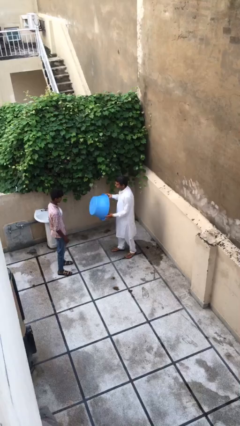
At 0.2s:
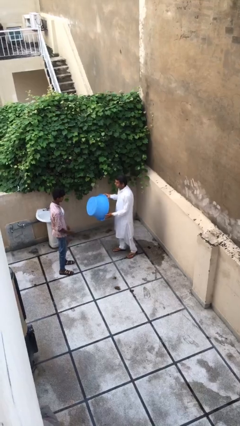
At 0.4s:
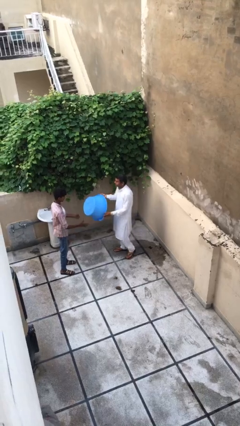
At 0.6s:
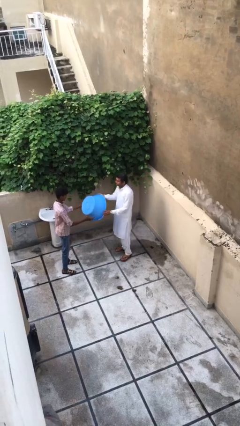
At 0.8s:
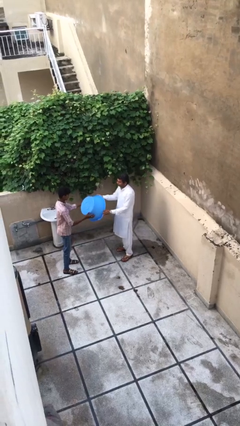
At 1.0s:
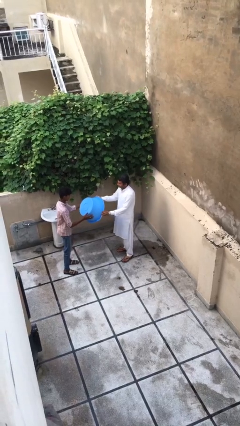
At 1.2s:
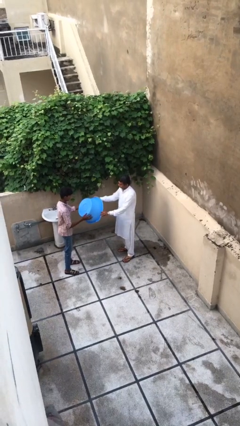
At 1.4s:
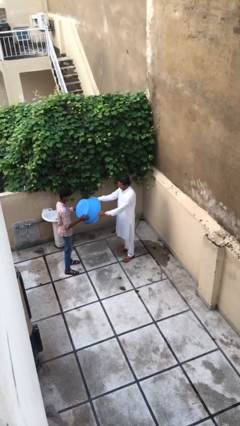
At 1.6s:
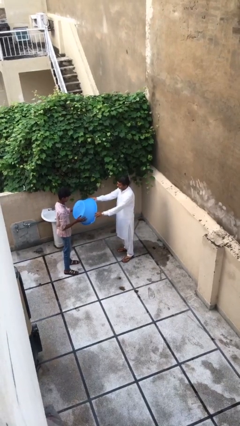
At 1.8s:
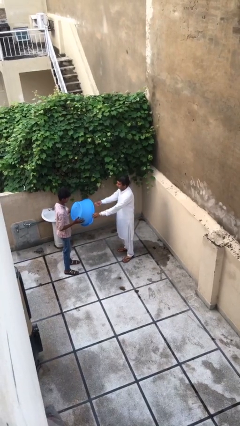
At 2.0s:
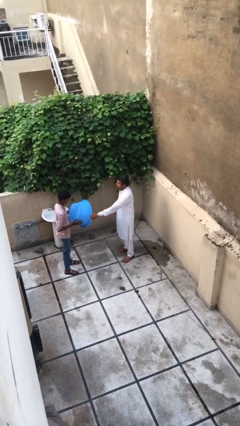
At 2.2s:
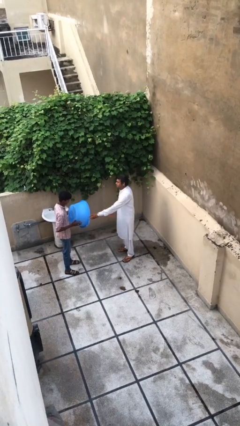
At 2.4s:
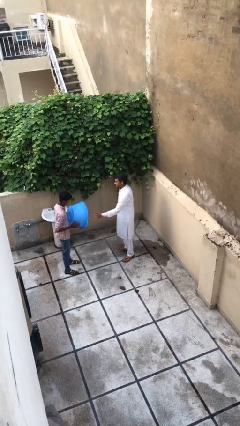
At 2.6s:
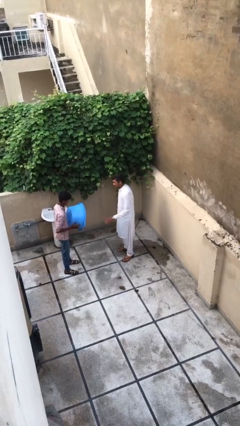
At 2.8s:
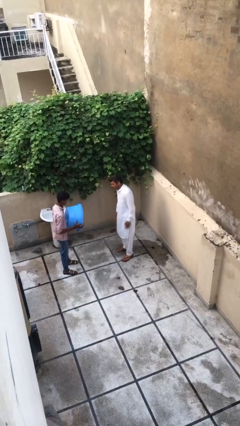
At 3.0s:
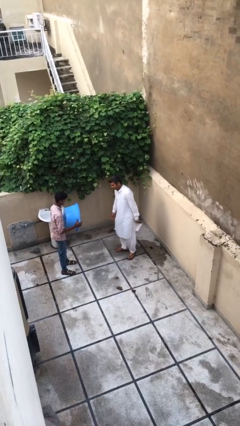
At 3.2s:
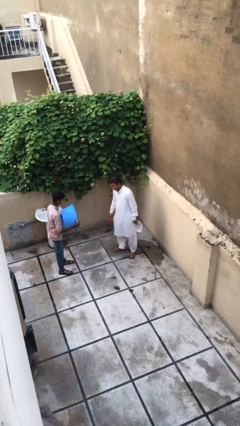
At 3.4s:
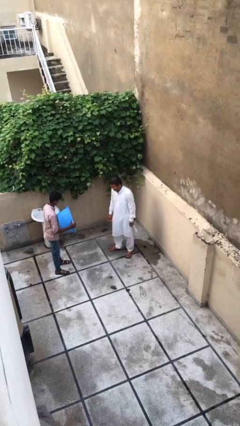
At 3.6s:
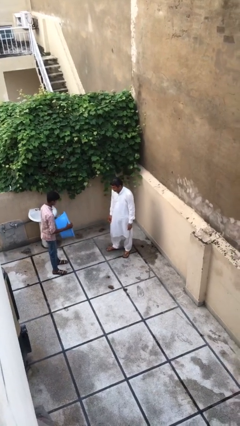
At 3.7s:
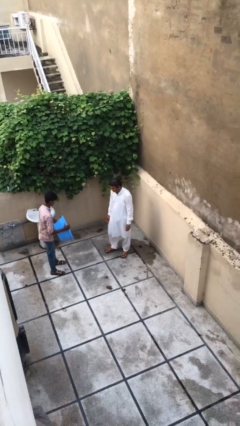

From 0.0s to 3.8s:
person transfers object to person

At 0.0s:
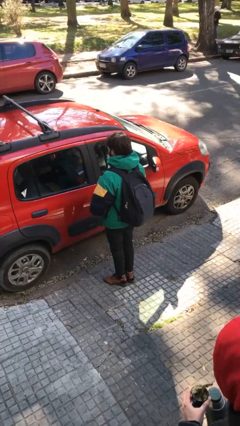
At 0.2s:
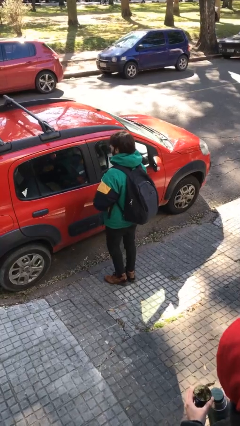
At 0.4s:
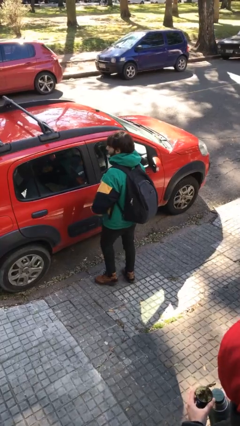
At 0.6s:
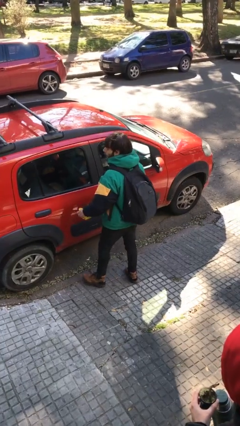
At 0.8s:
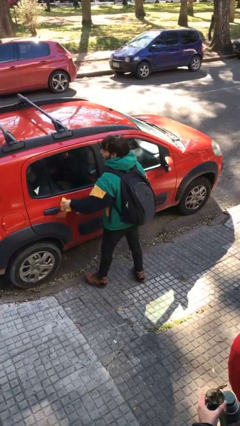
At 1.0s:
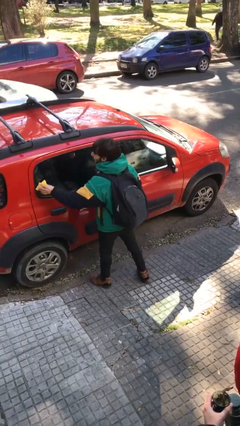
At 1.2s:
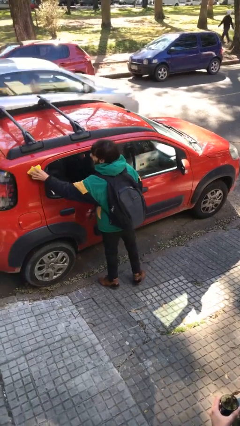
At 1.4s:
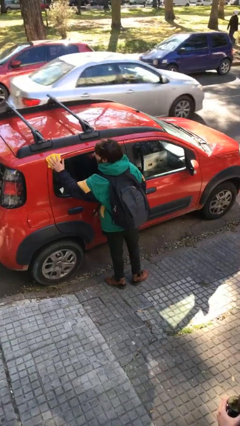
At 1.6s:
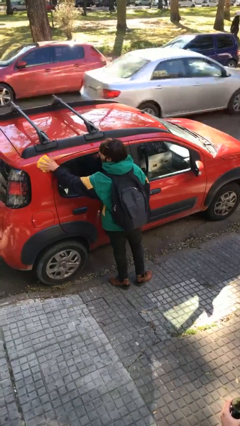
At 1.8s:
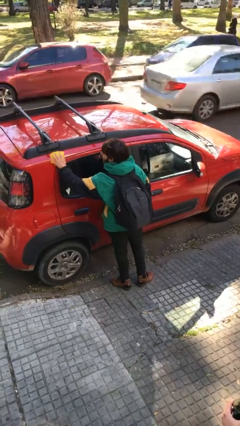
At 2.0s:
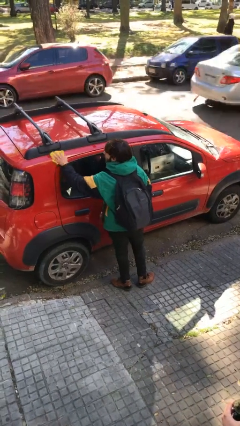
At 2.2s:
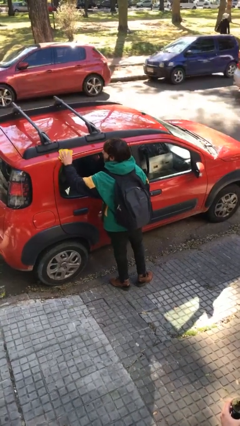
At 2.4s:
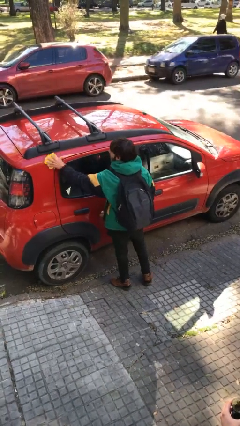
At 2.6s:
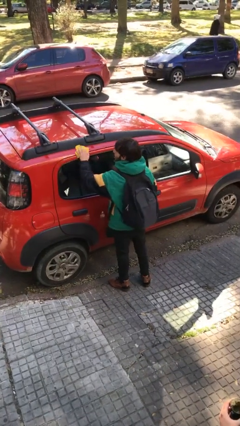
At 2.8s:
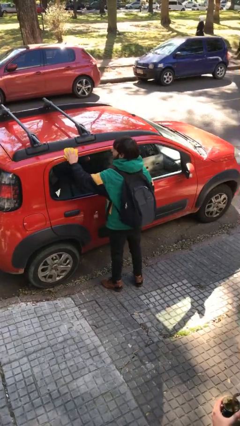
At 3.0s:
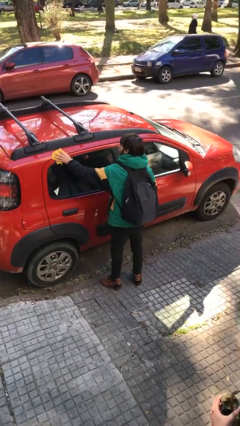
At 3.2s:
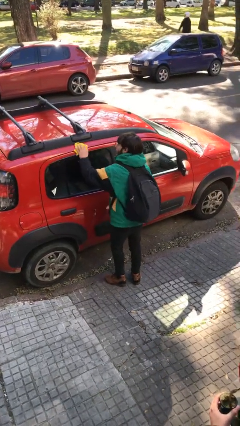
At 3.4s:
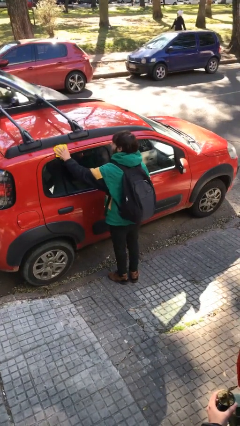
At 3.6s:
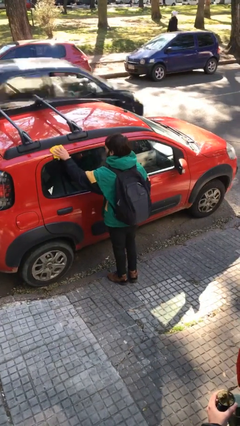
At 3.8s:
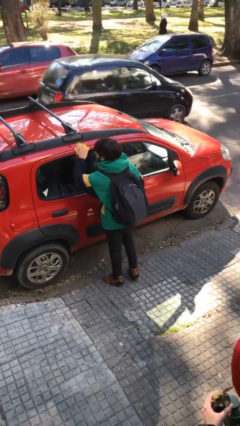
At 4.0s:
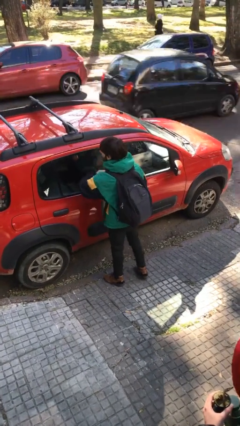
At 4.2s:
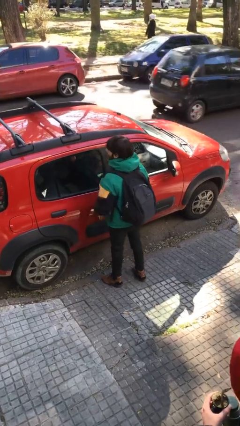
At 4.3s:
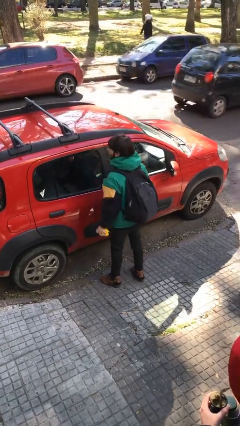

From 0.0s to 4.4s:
person polishes car with rag

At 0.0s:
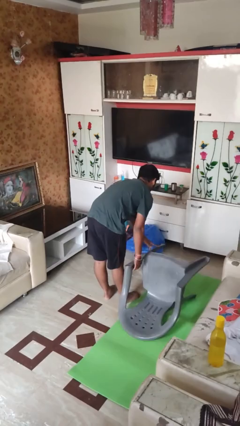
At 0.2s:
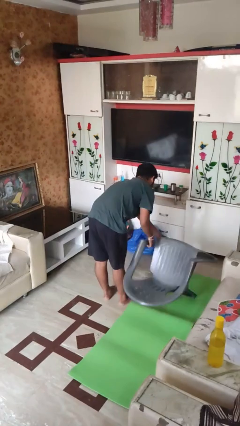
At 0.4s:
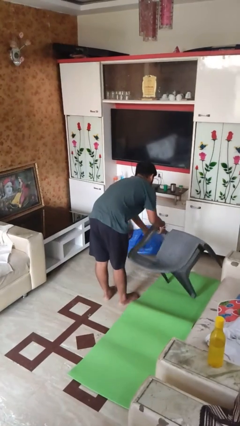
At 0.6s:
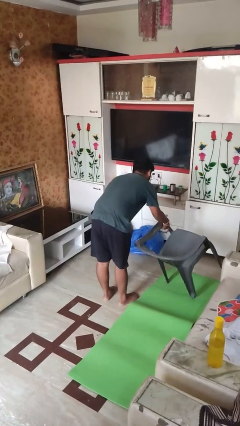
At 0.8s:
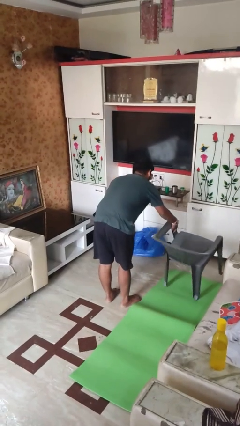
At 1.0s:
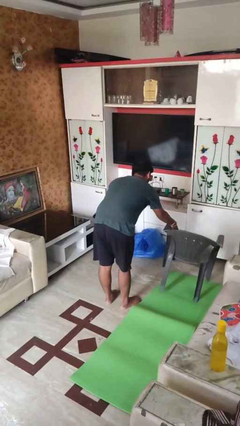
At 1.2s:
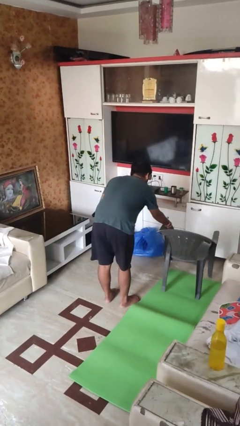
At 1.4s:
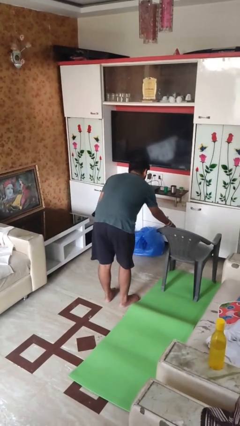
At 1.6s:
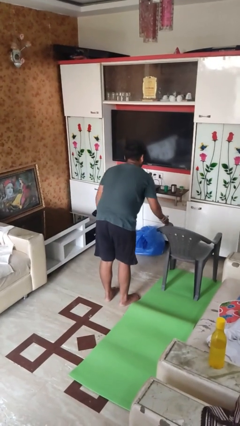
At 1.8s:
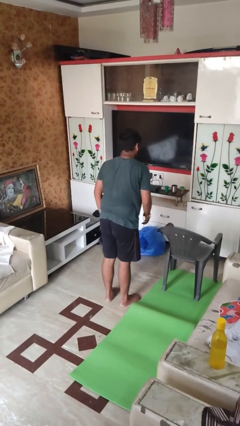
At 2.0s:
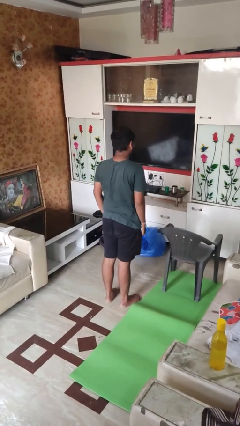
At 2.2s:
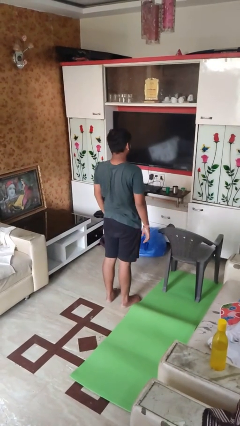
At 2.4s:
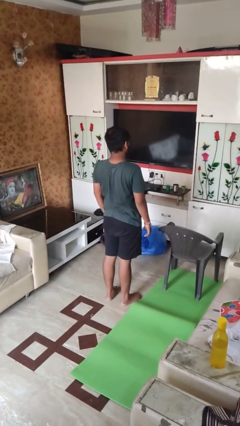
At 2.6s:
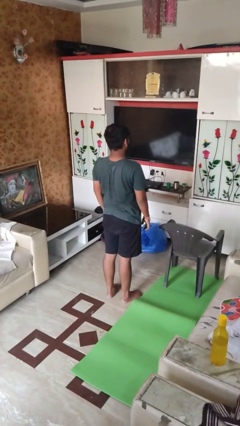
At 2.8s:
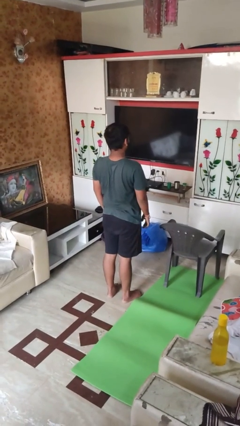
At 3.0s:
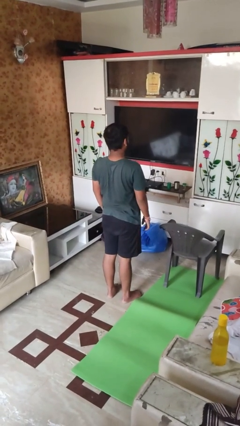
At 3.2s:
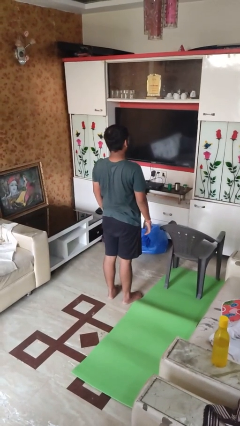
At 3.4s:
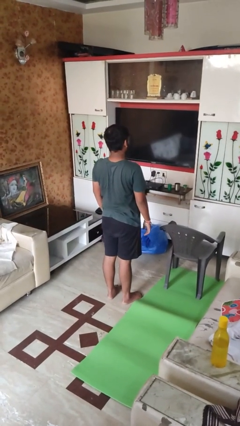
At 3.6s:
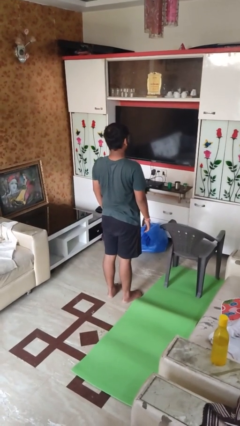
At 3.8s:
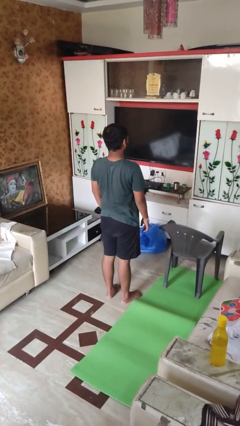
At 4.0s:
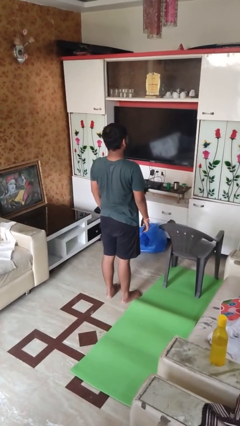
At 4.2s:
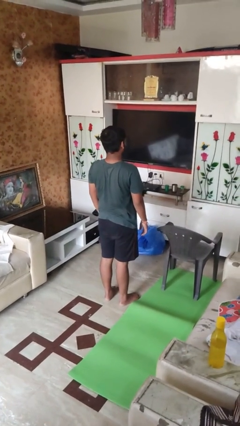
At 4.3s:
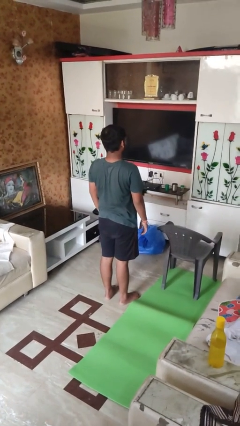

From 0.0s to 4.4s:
person sets upright furniture

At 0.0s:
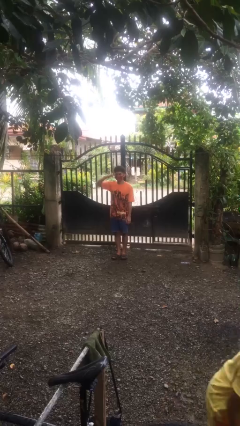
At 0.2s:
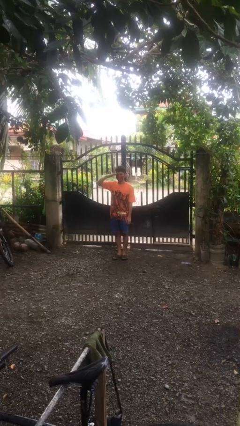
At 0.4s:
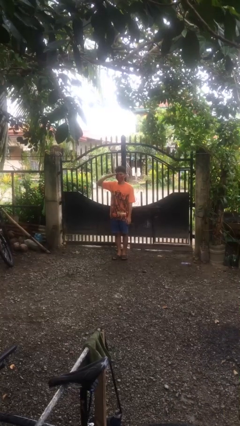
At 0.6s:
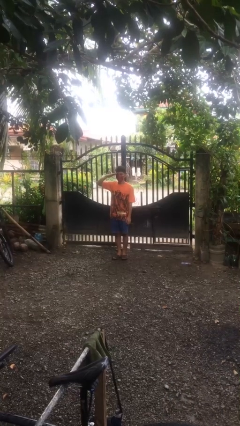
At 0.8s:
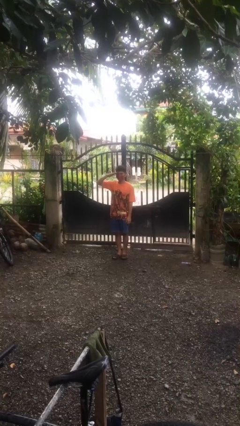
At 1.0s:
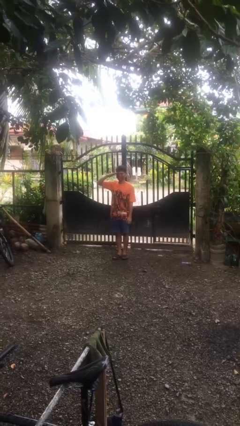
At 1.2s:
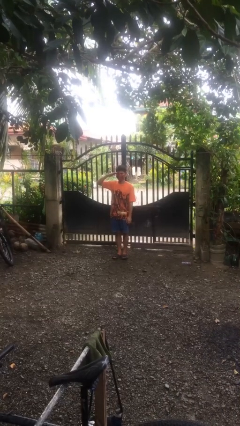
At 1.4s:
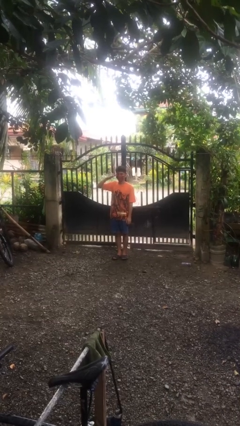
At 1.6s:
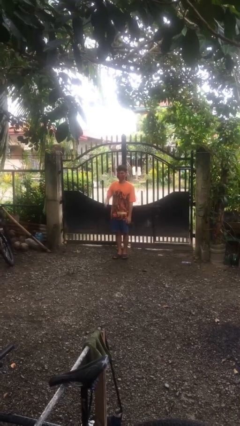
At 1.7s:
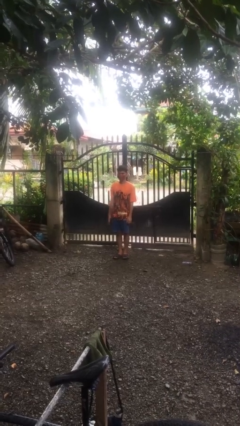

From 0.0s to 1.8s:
person salutes

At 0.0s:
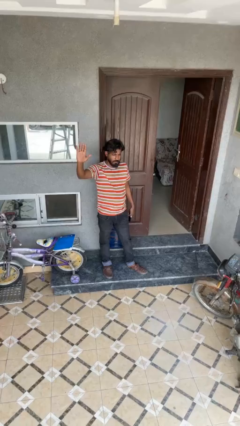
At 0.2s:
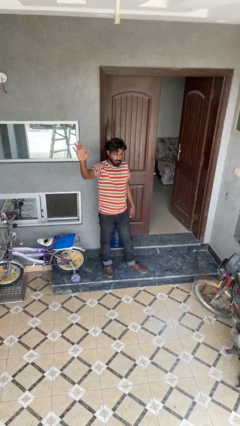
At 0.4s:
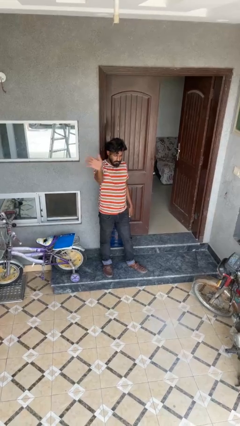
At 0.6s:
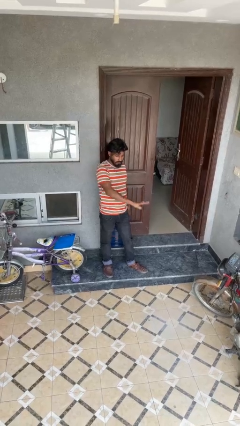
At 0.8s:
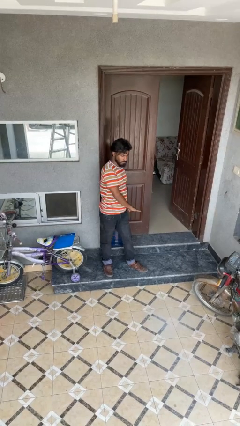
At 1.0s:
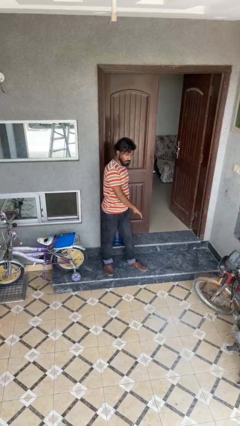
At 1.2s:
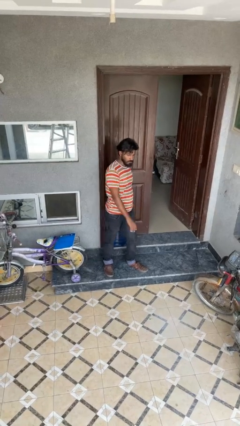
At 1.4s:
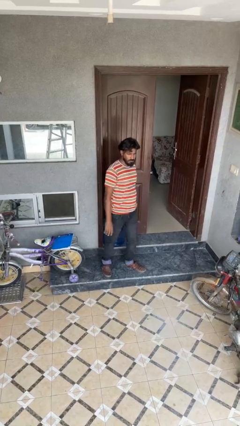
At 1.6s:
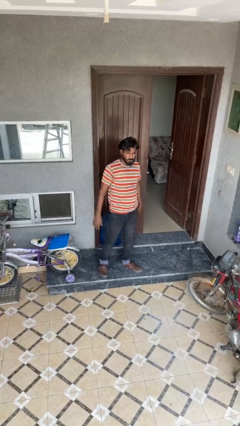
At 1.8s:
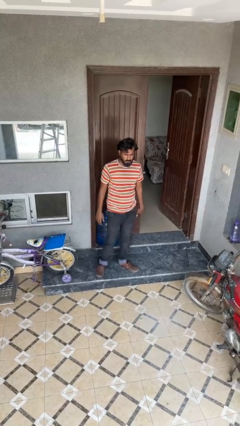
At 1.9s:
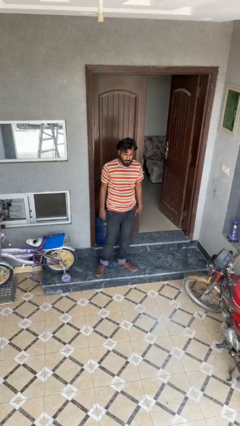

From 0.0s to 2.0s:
person gestures swipe down

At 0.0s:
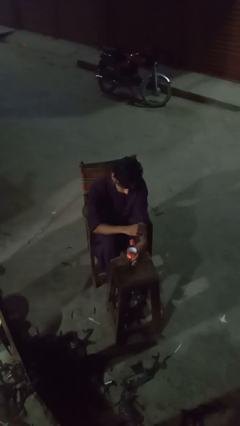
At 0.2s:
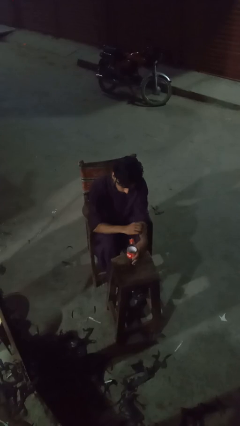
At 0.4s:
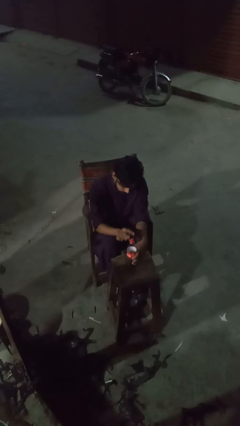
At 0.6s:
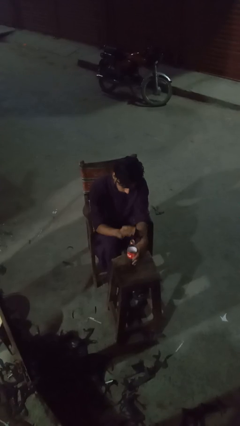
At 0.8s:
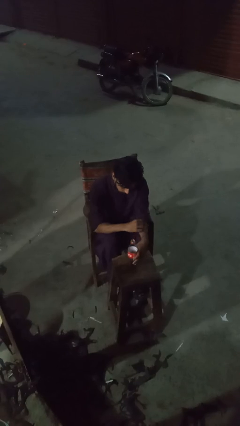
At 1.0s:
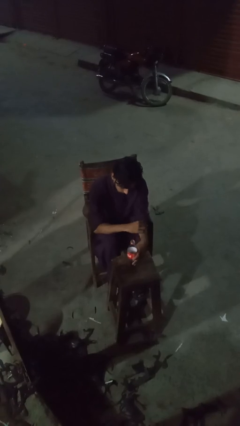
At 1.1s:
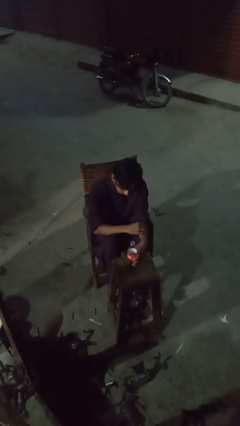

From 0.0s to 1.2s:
person unscrews lid from bottle
